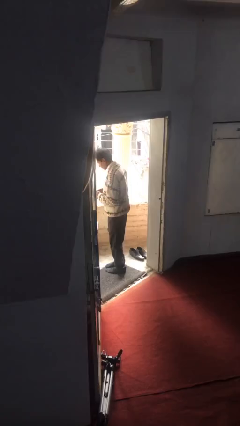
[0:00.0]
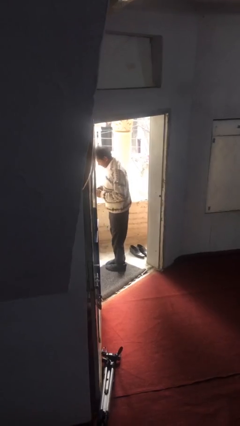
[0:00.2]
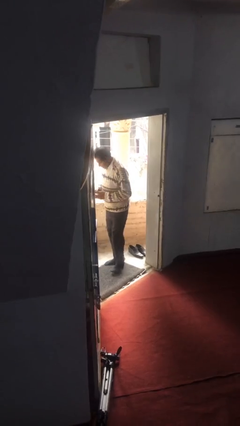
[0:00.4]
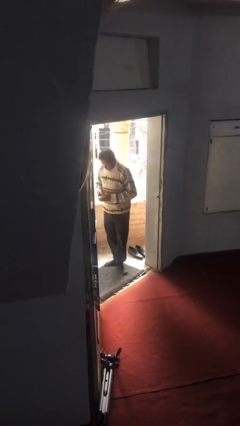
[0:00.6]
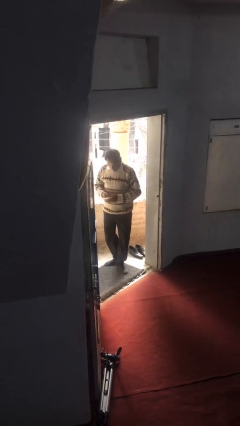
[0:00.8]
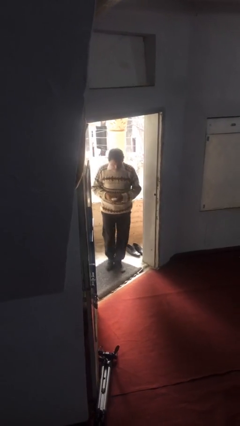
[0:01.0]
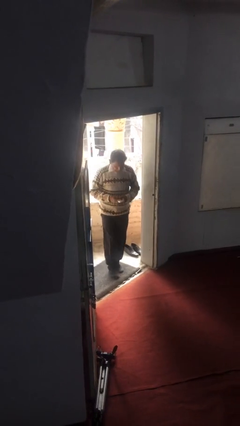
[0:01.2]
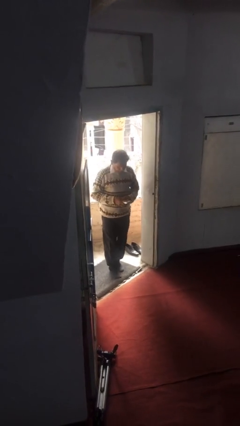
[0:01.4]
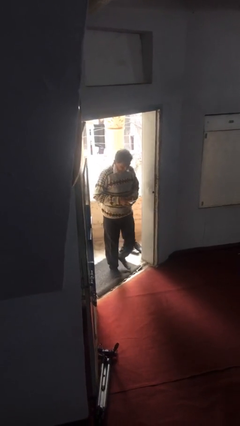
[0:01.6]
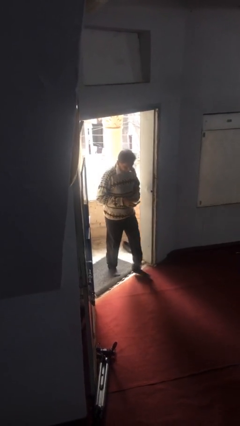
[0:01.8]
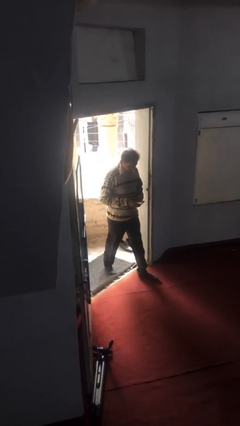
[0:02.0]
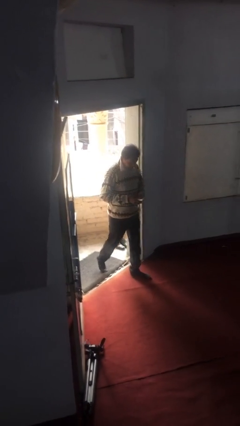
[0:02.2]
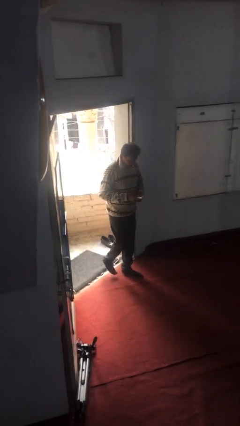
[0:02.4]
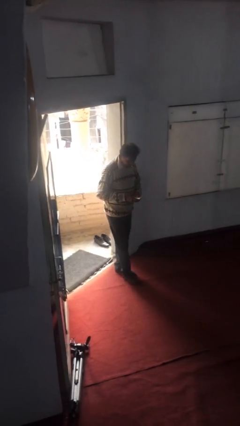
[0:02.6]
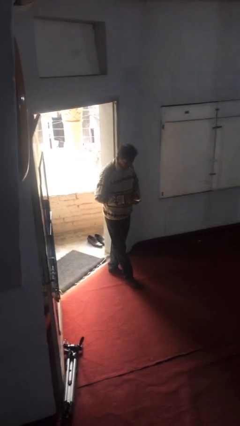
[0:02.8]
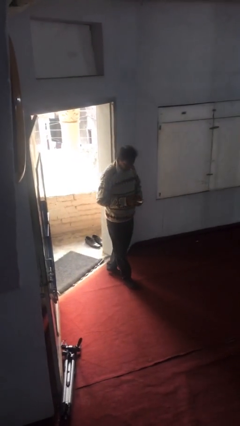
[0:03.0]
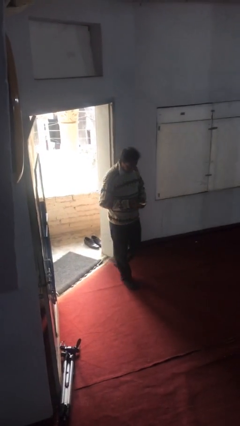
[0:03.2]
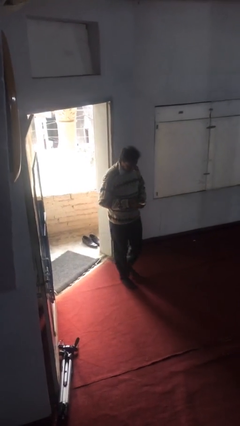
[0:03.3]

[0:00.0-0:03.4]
person enters scene through structure

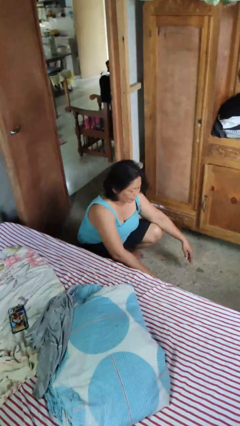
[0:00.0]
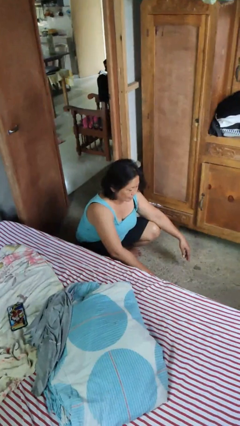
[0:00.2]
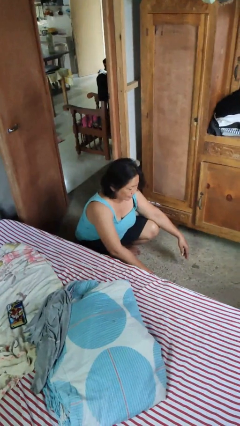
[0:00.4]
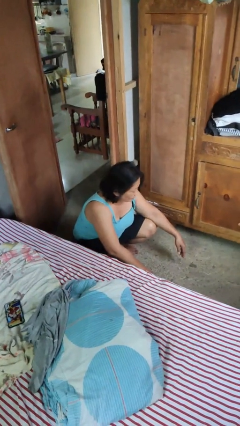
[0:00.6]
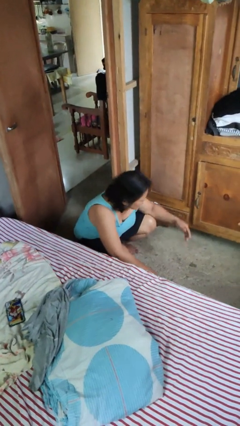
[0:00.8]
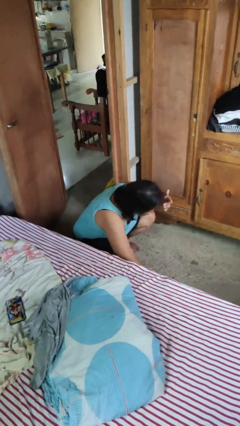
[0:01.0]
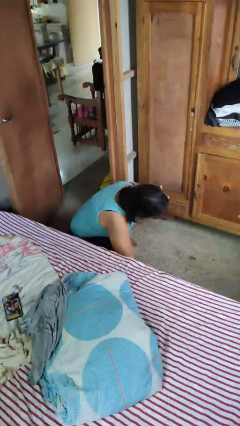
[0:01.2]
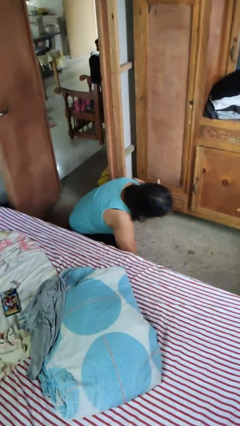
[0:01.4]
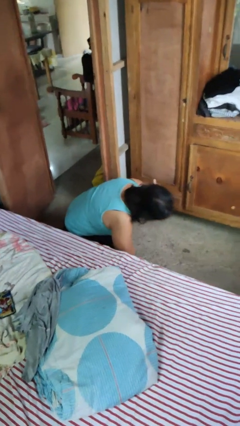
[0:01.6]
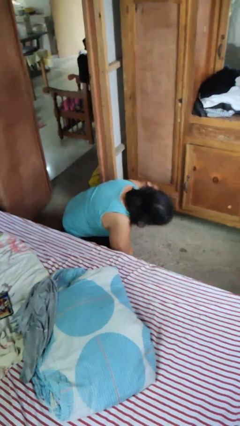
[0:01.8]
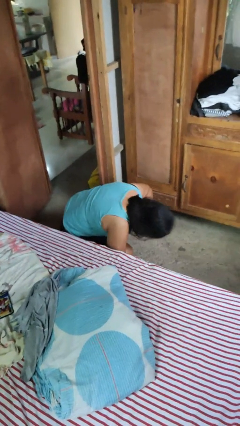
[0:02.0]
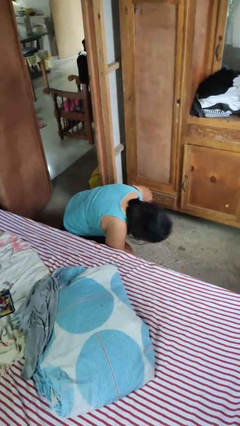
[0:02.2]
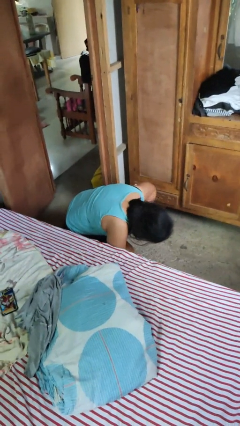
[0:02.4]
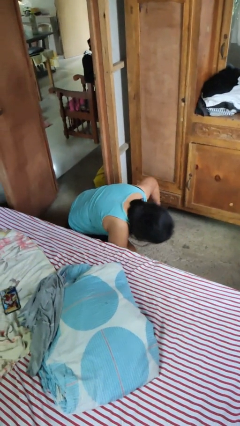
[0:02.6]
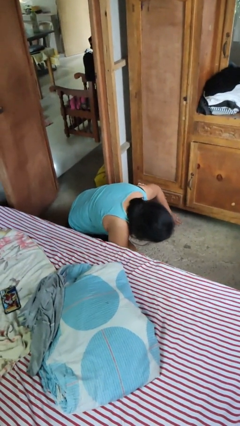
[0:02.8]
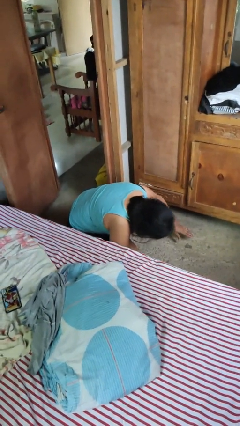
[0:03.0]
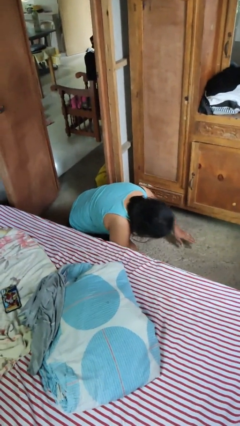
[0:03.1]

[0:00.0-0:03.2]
person searches under bed

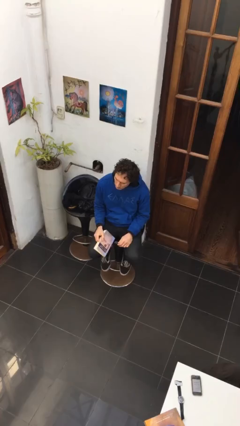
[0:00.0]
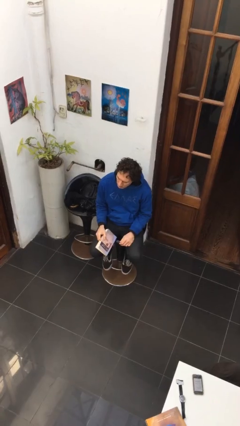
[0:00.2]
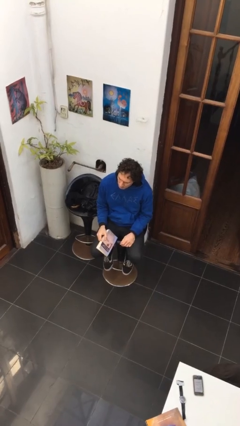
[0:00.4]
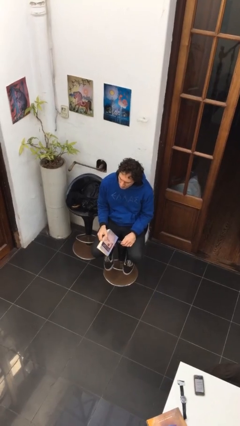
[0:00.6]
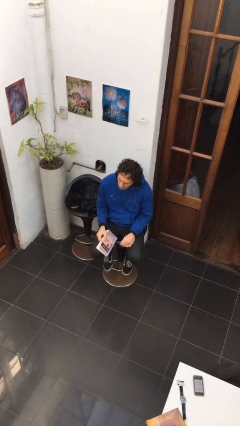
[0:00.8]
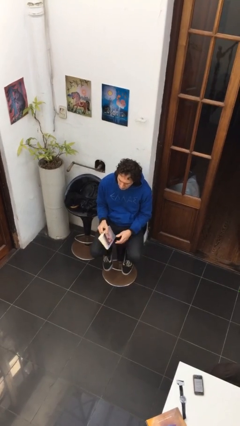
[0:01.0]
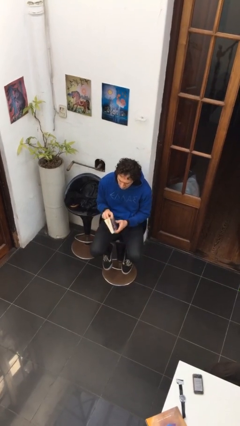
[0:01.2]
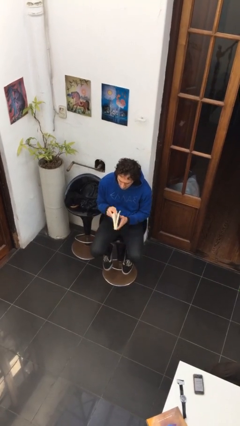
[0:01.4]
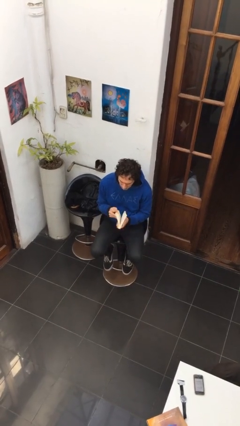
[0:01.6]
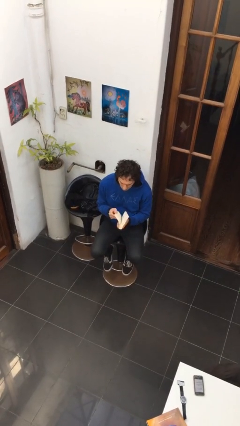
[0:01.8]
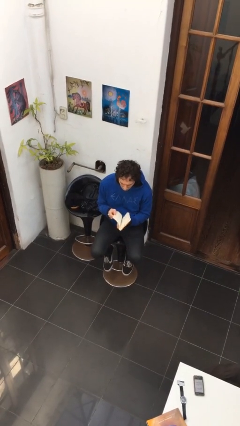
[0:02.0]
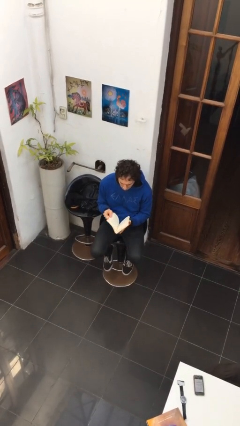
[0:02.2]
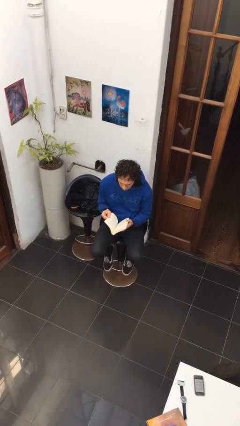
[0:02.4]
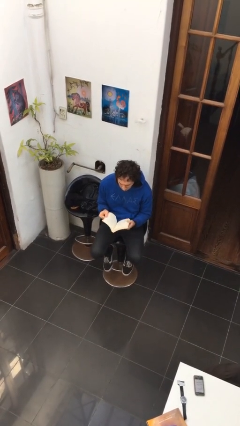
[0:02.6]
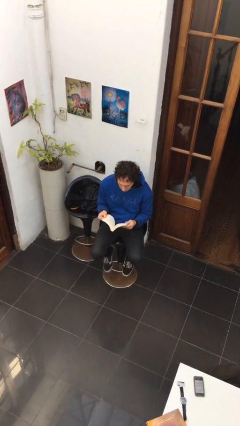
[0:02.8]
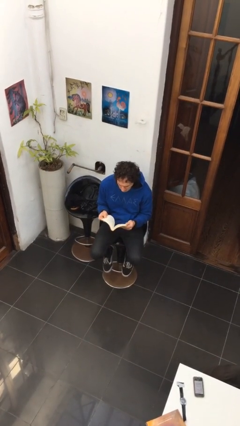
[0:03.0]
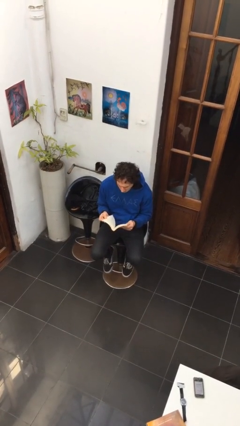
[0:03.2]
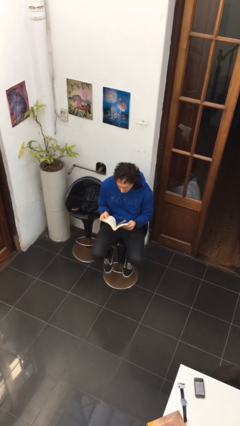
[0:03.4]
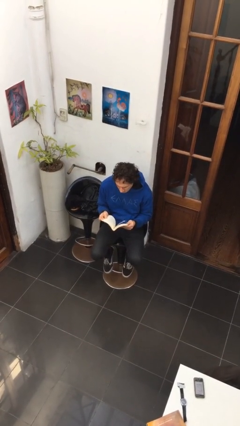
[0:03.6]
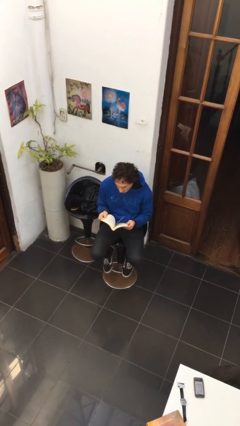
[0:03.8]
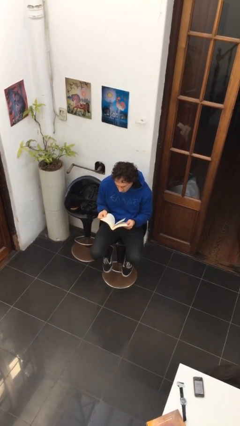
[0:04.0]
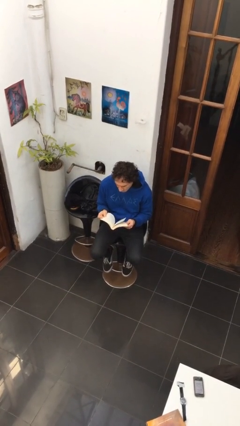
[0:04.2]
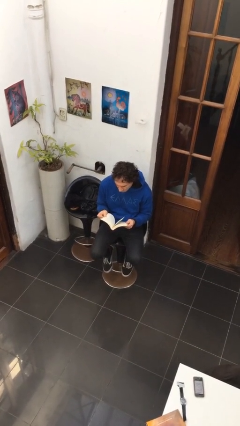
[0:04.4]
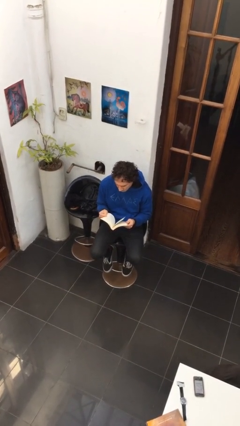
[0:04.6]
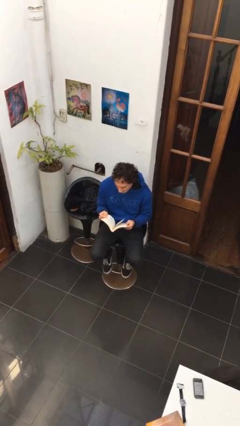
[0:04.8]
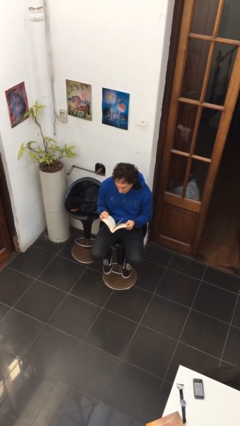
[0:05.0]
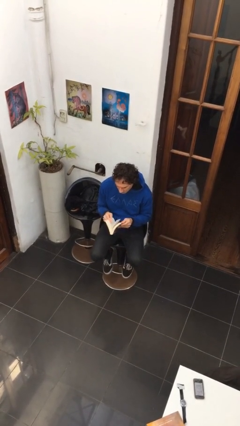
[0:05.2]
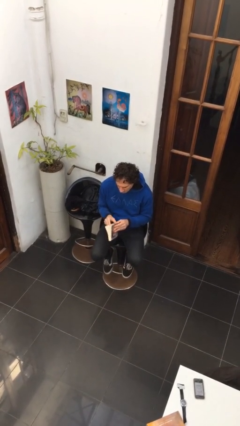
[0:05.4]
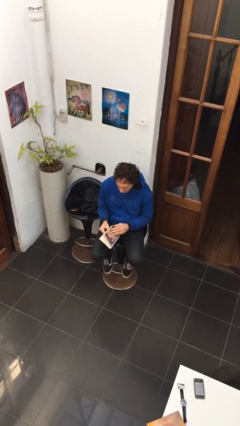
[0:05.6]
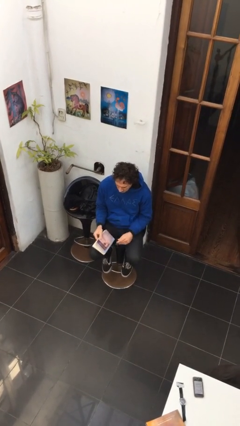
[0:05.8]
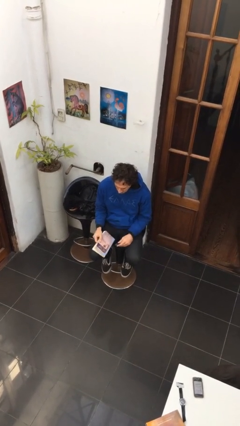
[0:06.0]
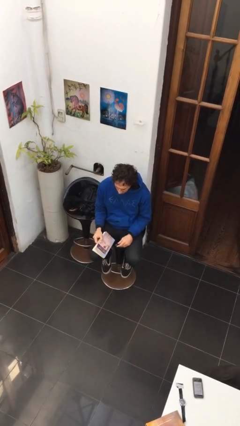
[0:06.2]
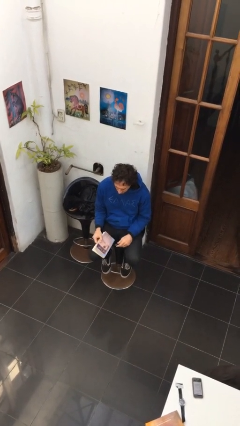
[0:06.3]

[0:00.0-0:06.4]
person reads book

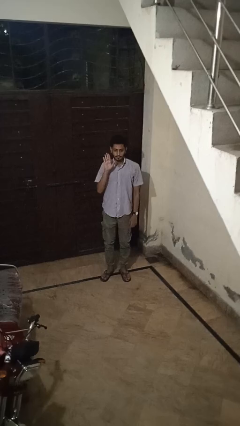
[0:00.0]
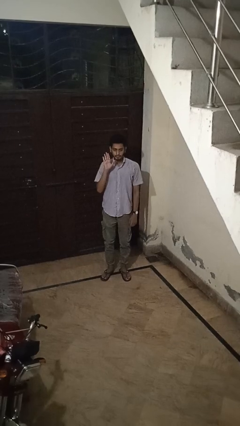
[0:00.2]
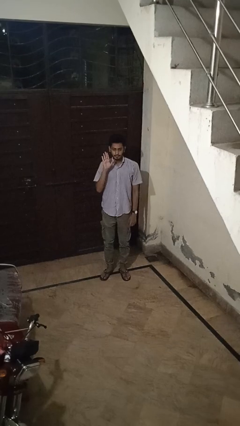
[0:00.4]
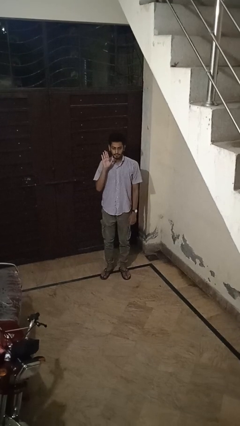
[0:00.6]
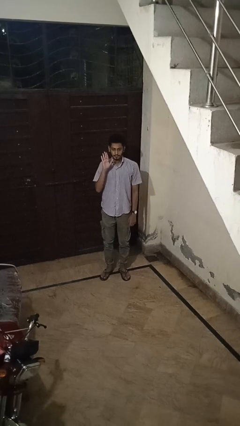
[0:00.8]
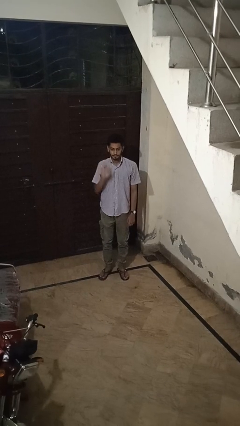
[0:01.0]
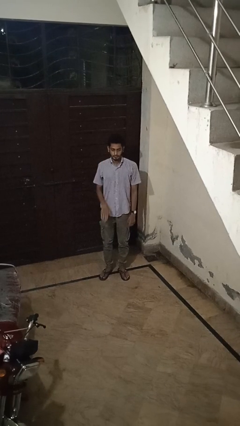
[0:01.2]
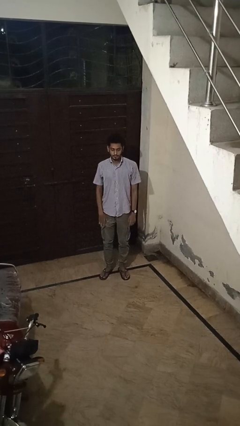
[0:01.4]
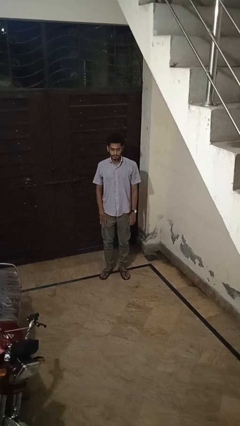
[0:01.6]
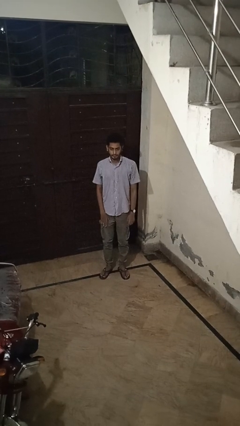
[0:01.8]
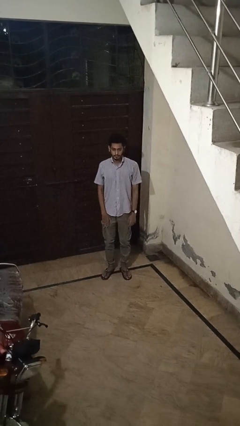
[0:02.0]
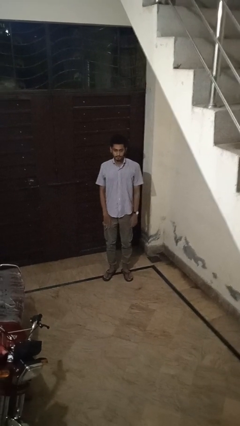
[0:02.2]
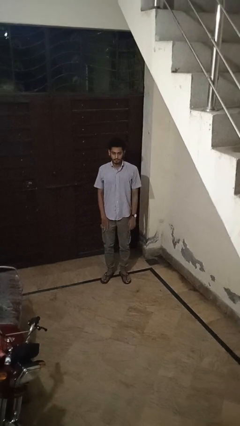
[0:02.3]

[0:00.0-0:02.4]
person gestures lower hand

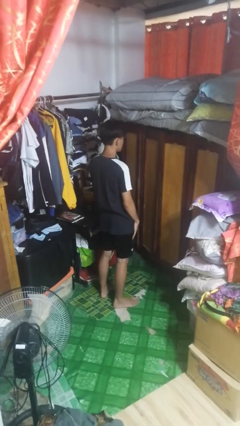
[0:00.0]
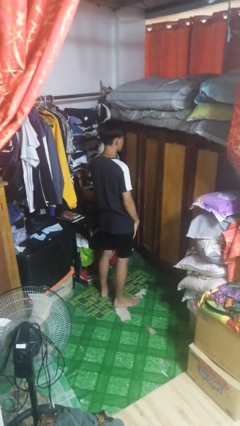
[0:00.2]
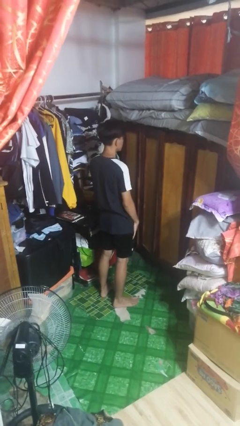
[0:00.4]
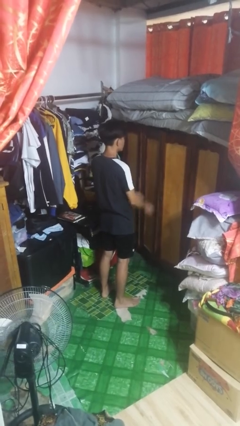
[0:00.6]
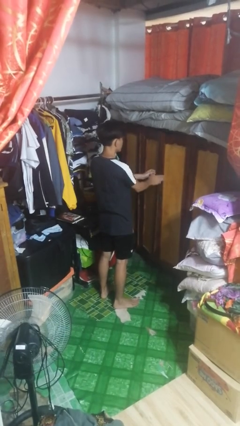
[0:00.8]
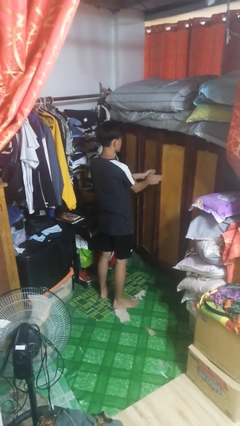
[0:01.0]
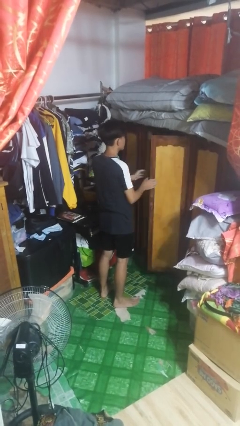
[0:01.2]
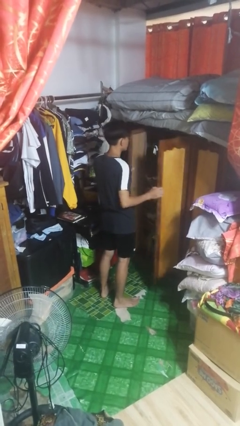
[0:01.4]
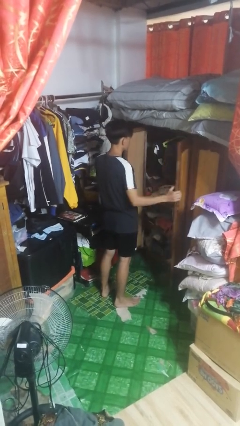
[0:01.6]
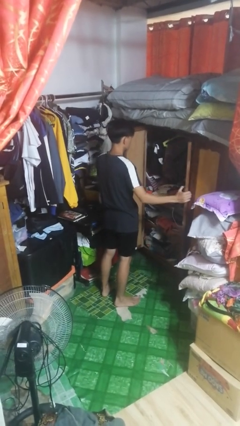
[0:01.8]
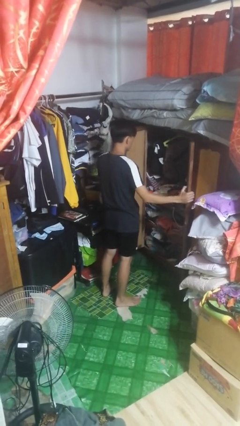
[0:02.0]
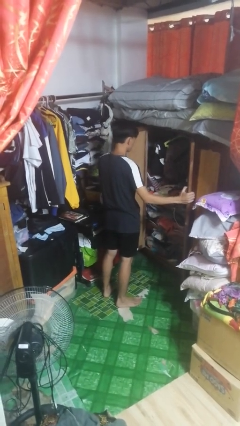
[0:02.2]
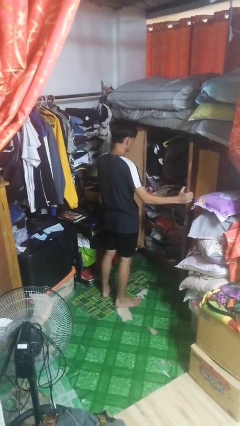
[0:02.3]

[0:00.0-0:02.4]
person opens dresser drawer
